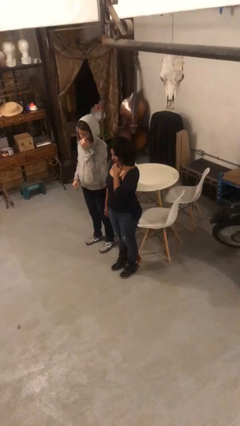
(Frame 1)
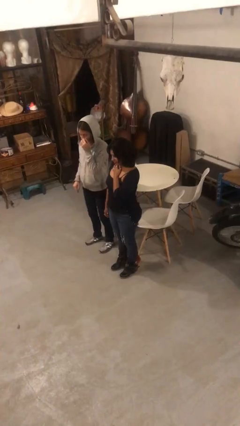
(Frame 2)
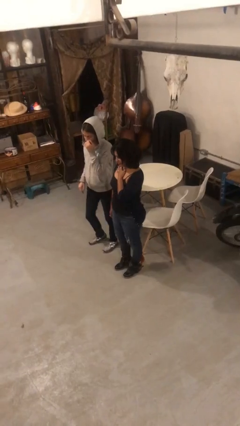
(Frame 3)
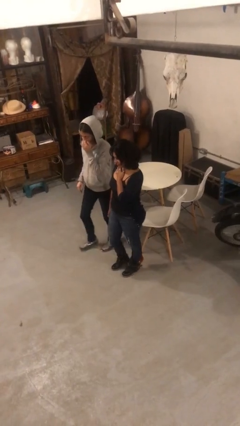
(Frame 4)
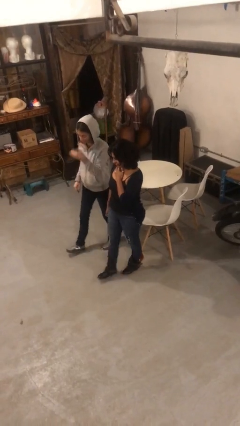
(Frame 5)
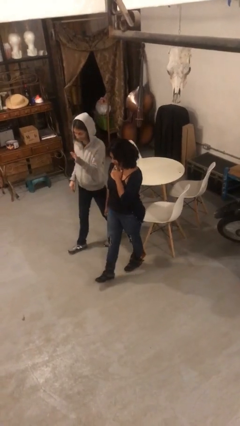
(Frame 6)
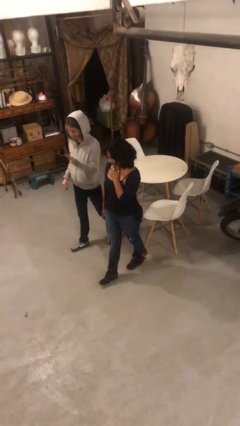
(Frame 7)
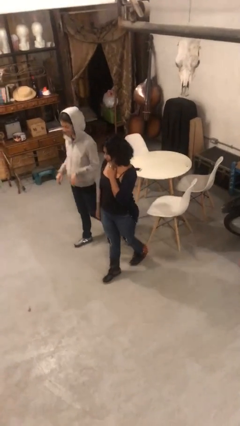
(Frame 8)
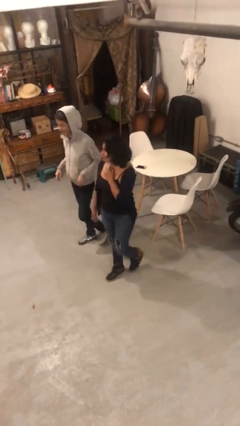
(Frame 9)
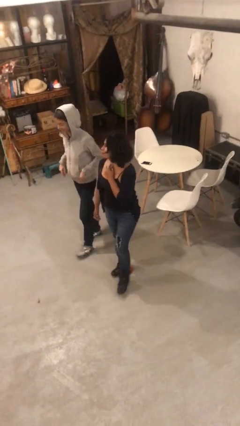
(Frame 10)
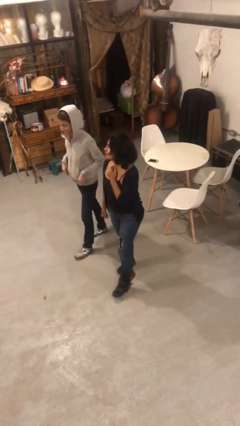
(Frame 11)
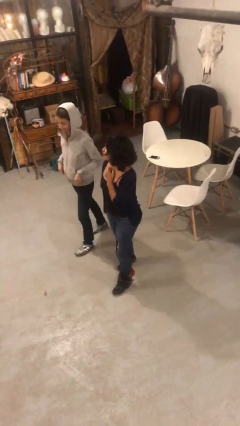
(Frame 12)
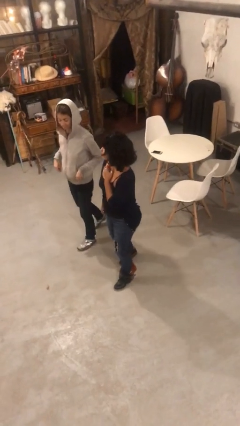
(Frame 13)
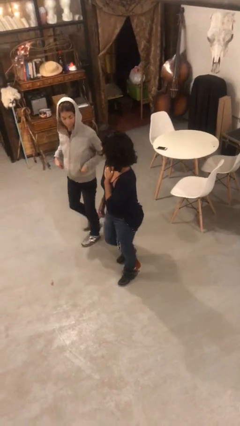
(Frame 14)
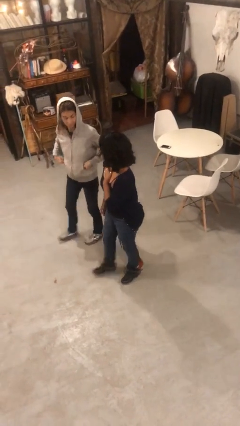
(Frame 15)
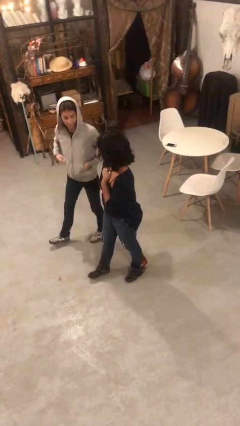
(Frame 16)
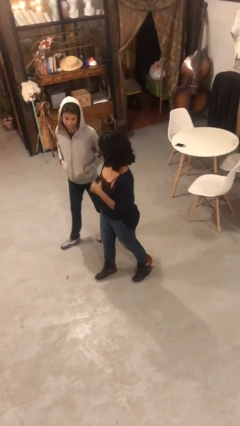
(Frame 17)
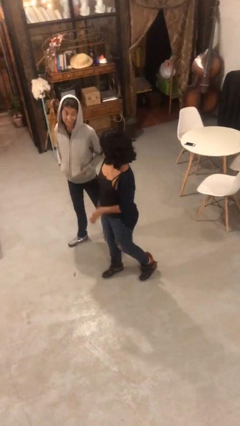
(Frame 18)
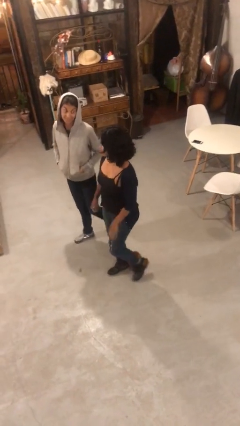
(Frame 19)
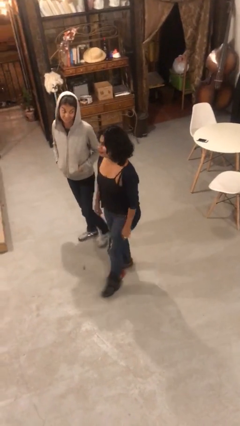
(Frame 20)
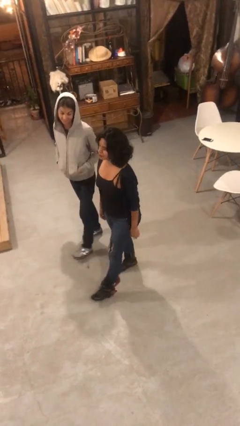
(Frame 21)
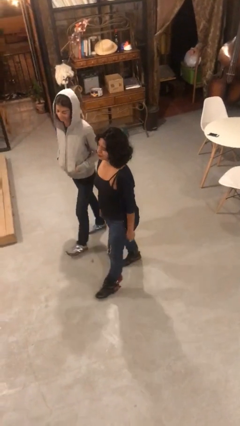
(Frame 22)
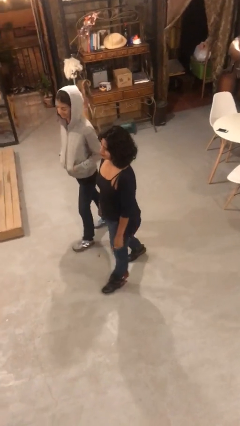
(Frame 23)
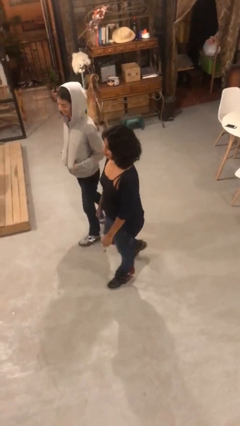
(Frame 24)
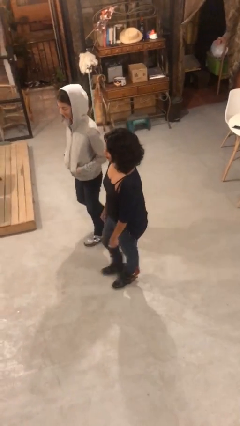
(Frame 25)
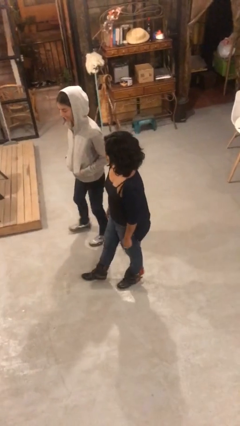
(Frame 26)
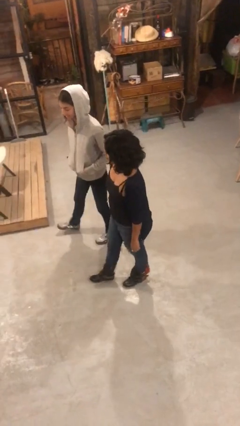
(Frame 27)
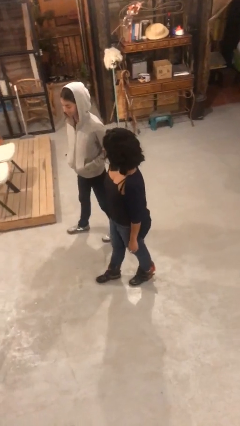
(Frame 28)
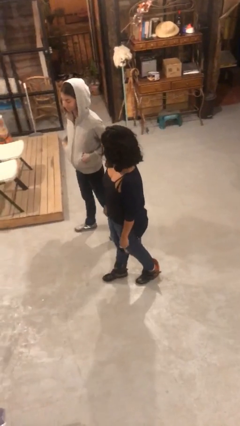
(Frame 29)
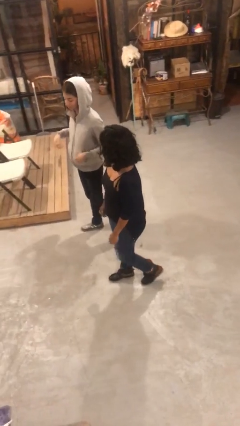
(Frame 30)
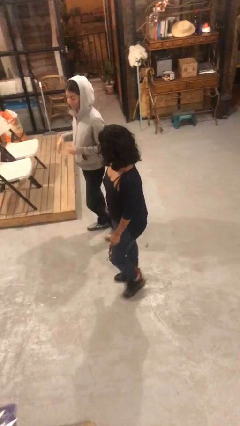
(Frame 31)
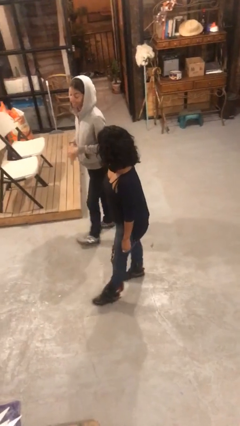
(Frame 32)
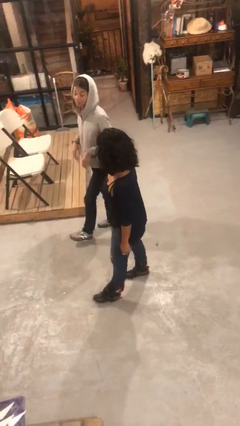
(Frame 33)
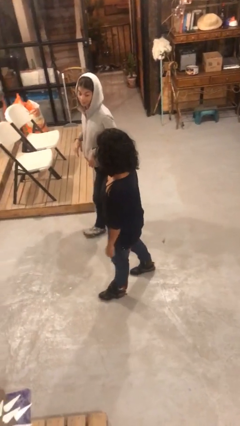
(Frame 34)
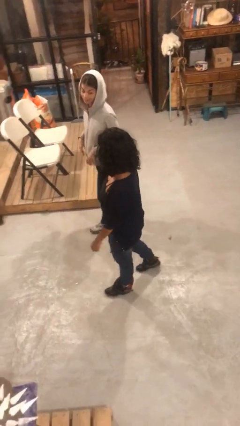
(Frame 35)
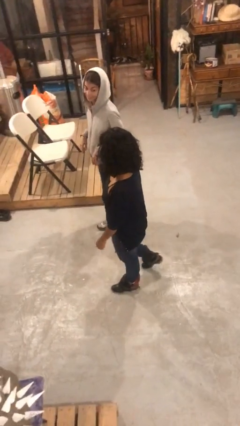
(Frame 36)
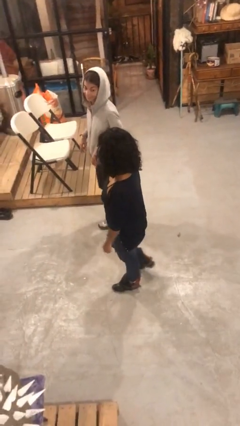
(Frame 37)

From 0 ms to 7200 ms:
person talks to person

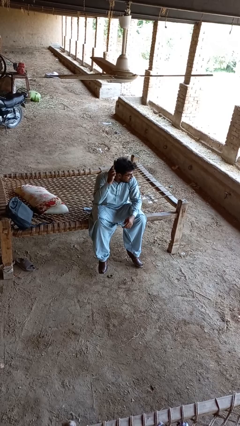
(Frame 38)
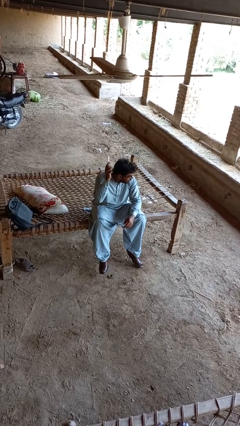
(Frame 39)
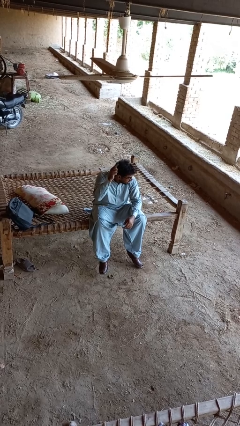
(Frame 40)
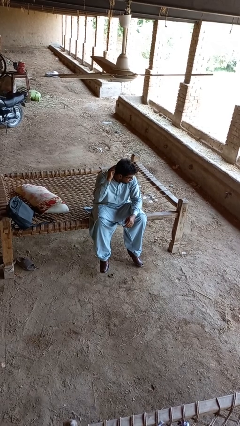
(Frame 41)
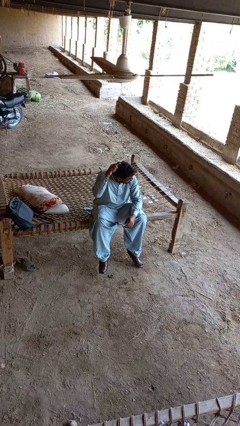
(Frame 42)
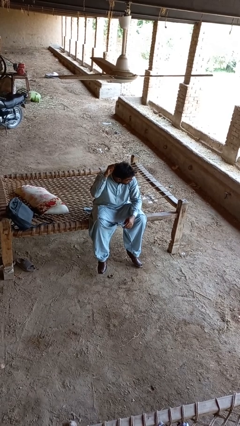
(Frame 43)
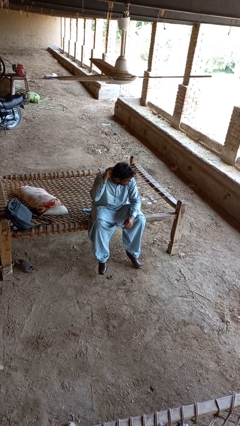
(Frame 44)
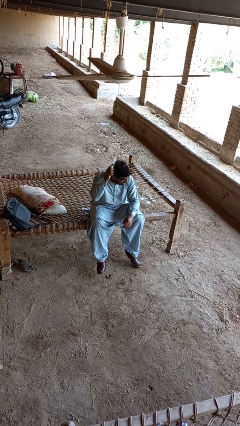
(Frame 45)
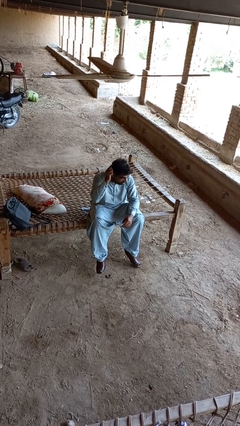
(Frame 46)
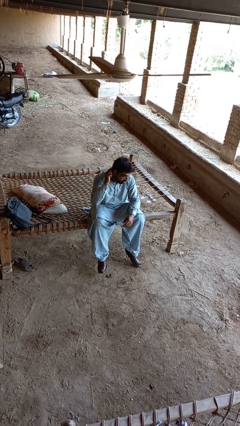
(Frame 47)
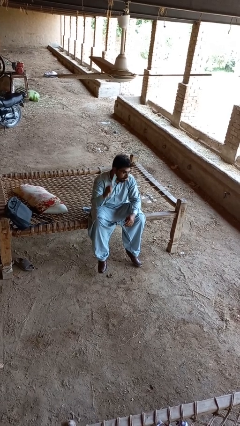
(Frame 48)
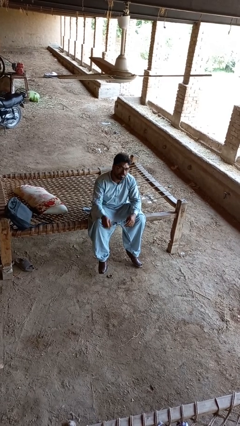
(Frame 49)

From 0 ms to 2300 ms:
person brushes hair

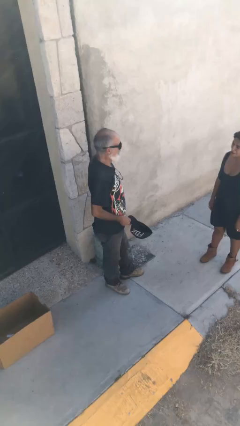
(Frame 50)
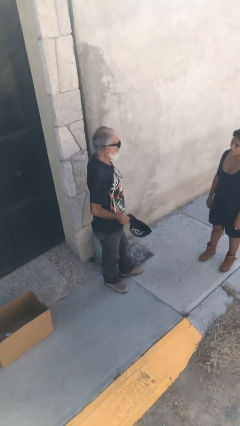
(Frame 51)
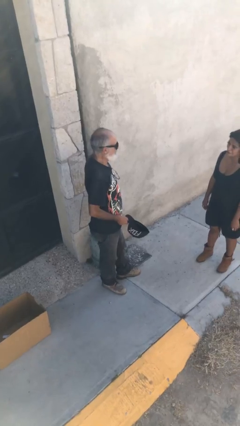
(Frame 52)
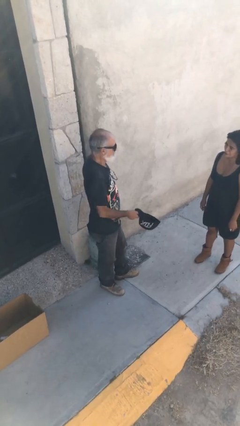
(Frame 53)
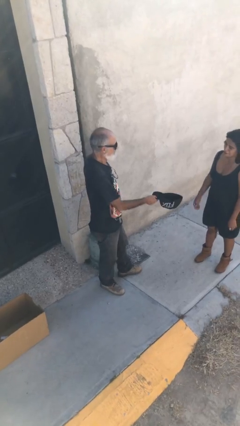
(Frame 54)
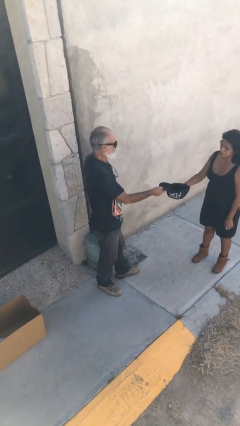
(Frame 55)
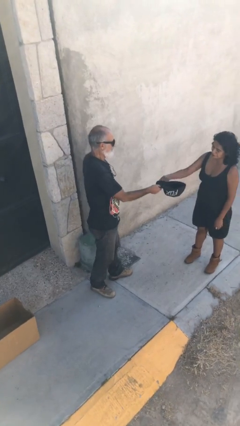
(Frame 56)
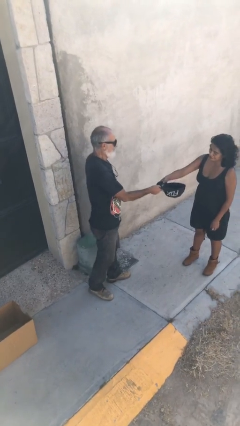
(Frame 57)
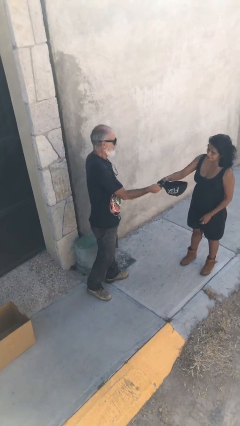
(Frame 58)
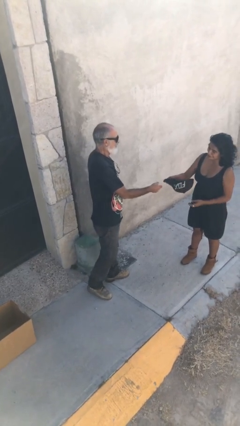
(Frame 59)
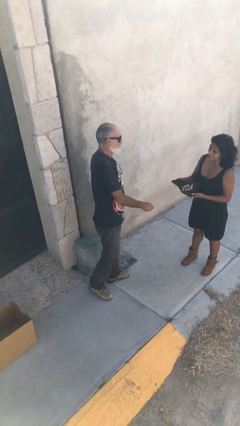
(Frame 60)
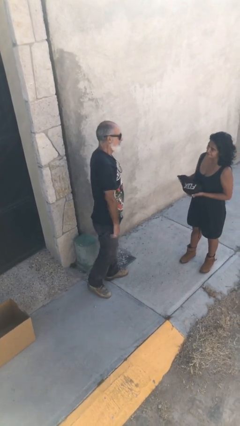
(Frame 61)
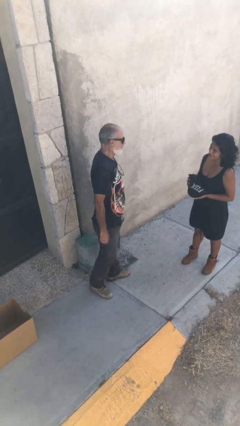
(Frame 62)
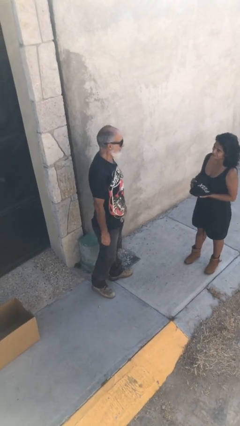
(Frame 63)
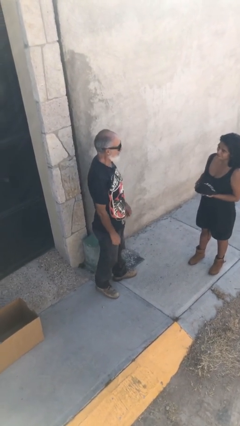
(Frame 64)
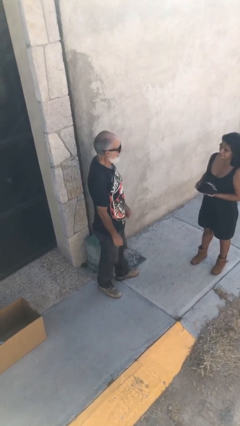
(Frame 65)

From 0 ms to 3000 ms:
person transfers object to person

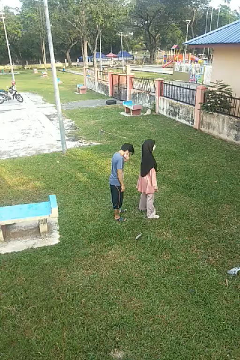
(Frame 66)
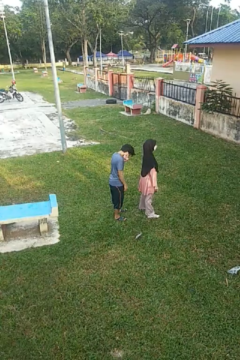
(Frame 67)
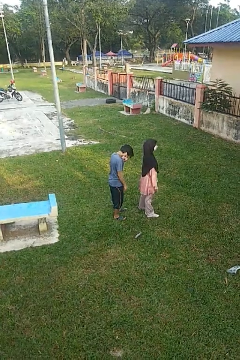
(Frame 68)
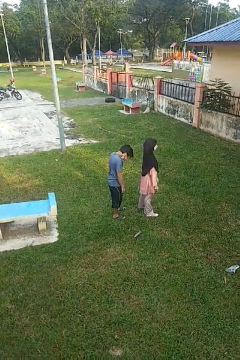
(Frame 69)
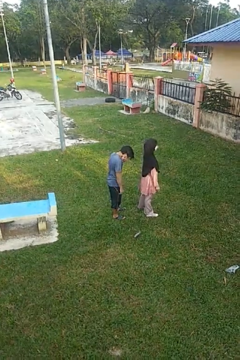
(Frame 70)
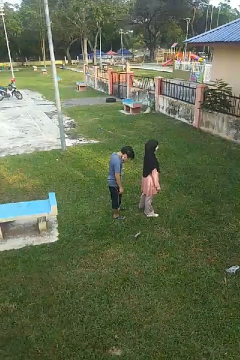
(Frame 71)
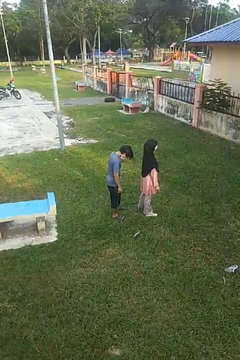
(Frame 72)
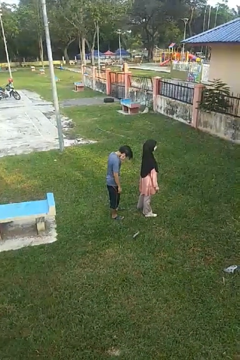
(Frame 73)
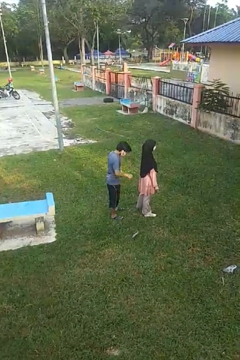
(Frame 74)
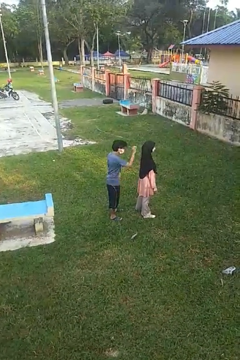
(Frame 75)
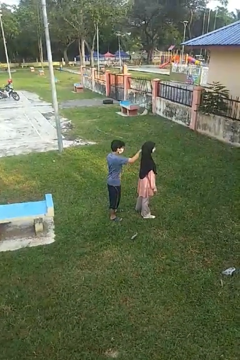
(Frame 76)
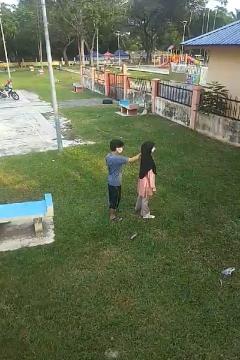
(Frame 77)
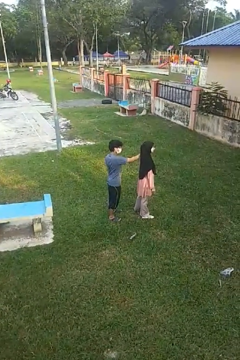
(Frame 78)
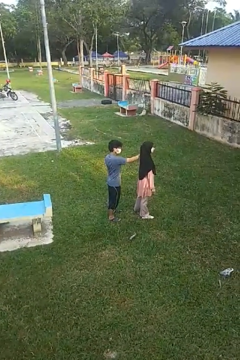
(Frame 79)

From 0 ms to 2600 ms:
person grabs person by shoulder

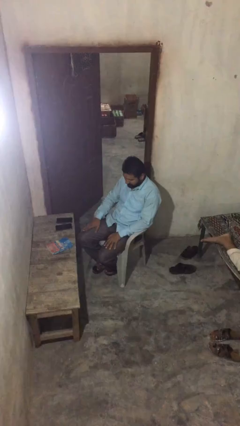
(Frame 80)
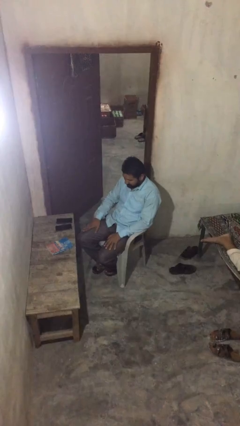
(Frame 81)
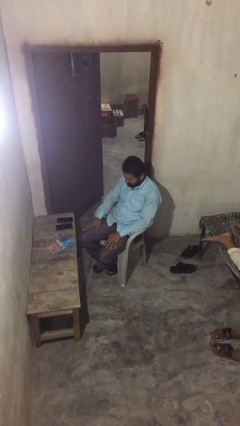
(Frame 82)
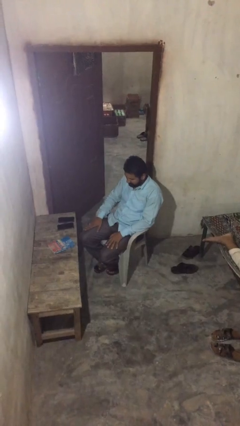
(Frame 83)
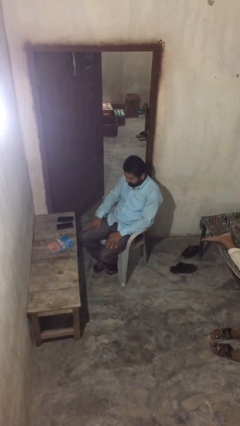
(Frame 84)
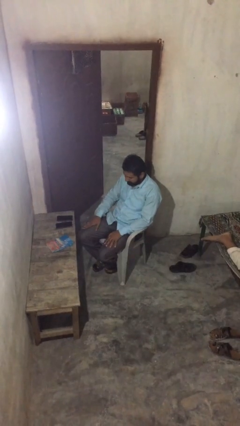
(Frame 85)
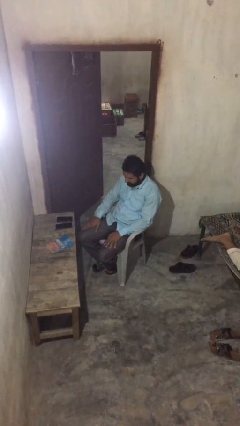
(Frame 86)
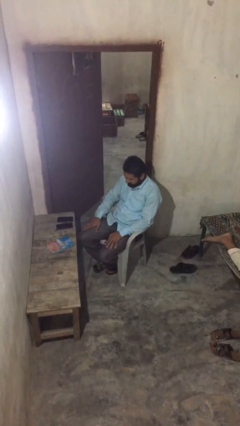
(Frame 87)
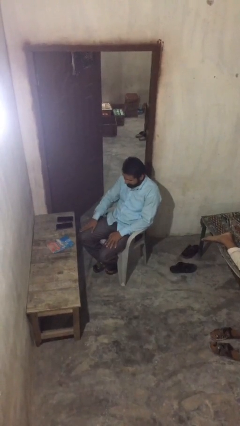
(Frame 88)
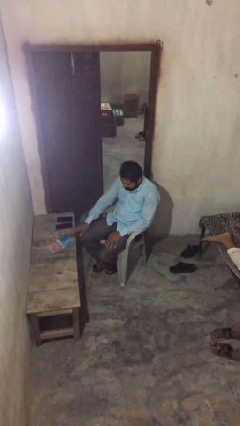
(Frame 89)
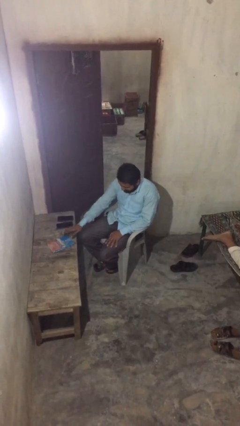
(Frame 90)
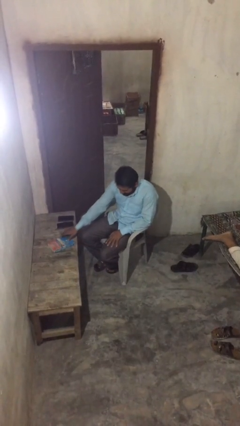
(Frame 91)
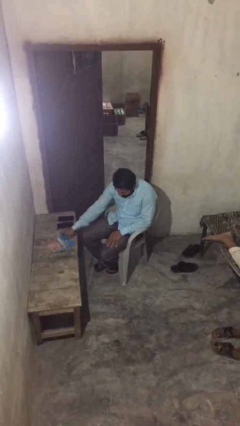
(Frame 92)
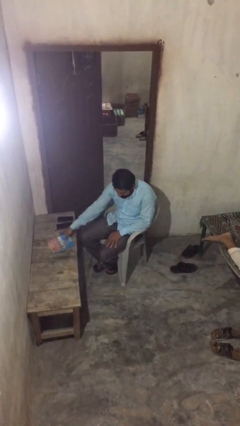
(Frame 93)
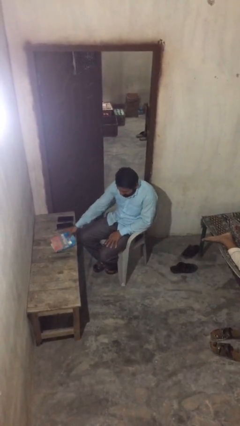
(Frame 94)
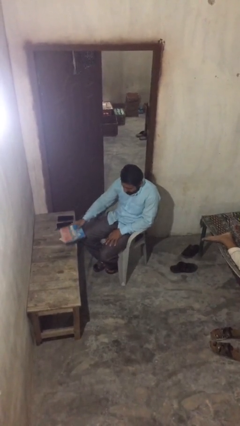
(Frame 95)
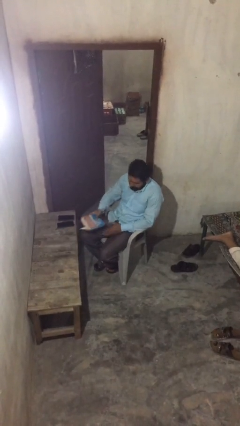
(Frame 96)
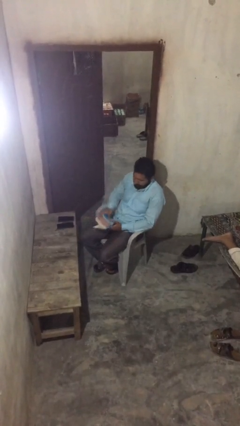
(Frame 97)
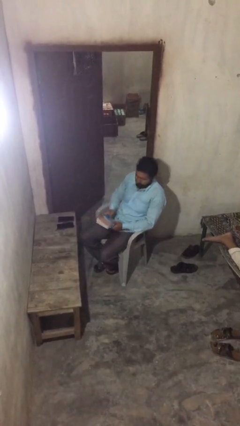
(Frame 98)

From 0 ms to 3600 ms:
person picks up object from table
